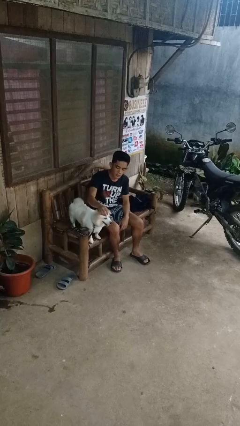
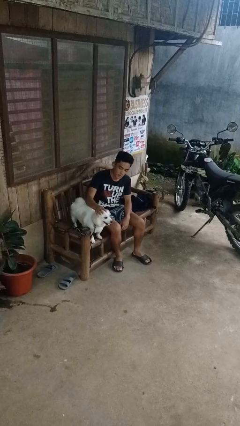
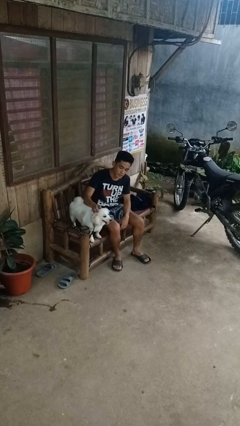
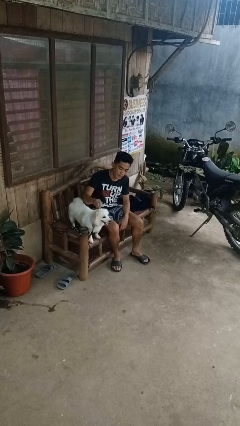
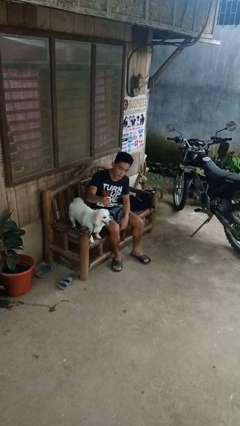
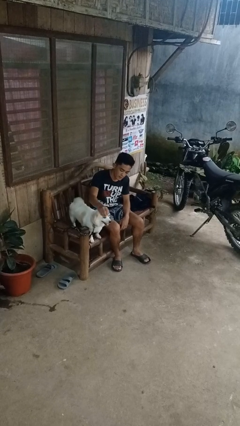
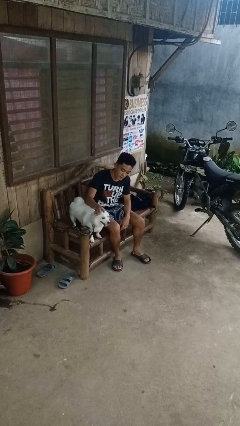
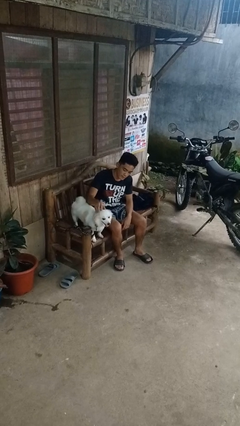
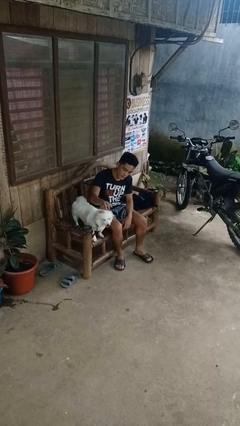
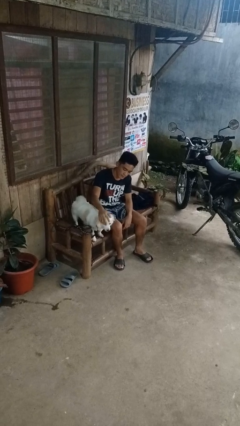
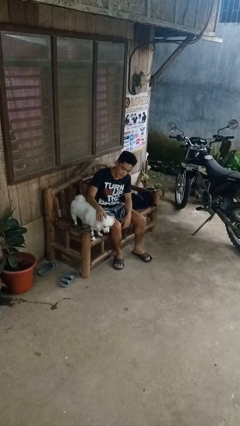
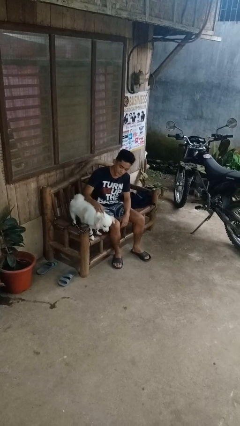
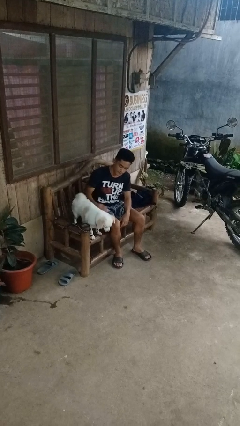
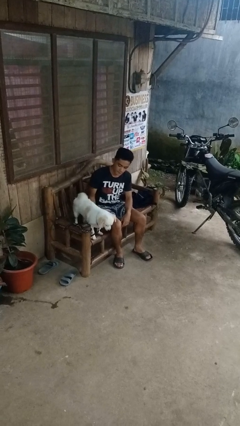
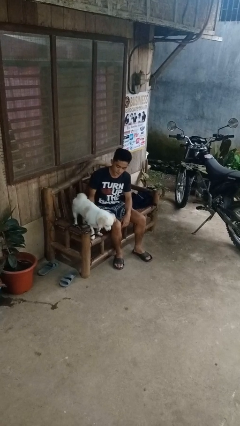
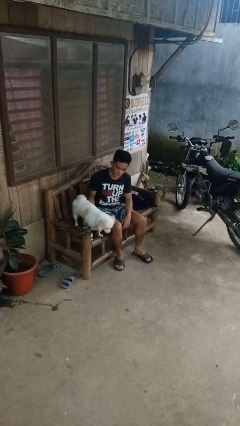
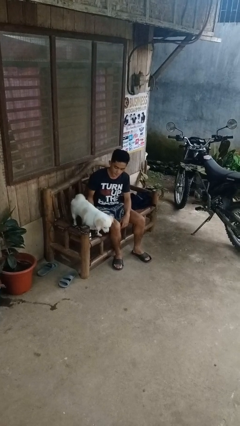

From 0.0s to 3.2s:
person pets dog

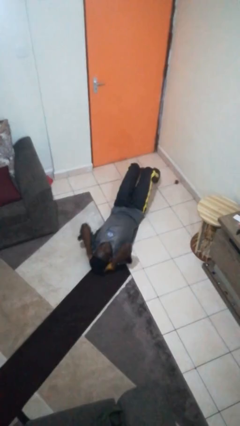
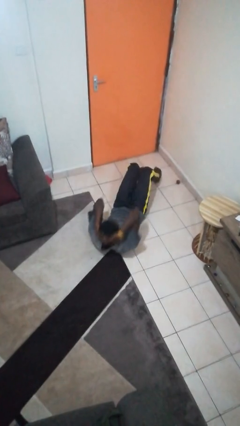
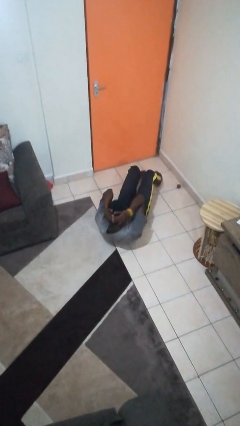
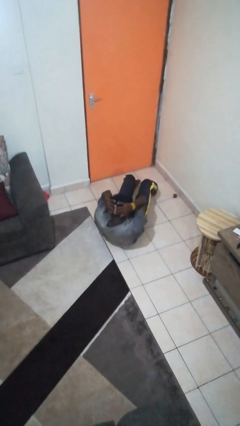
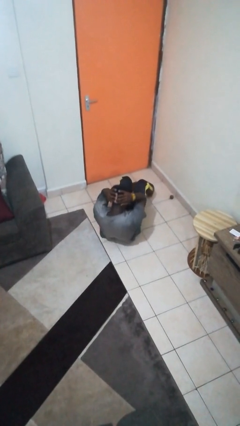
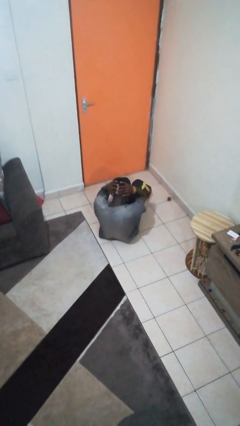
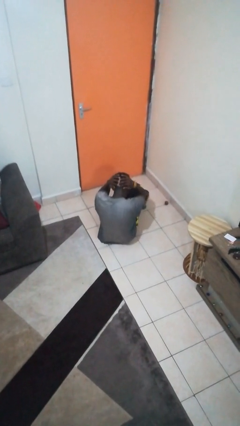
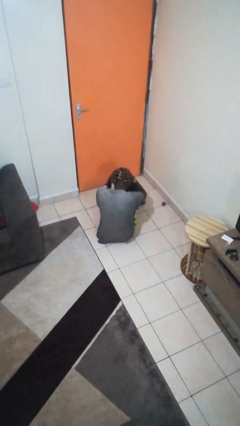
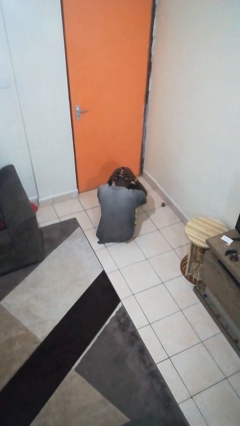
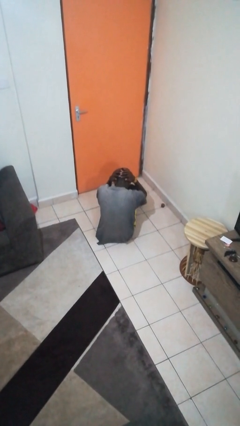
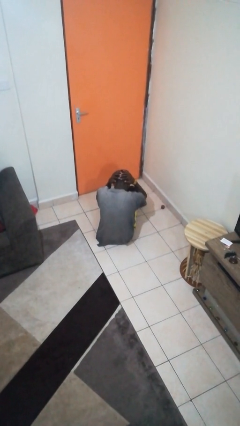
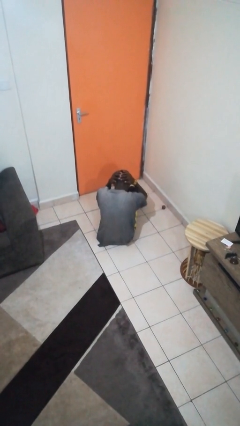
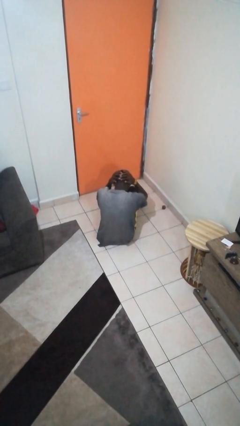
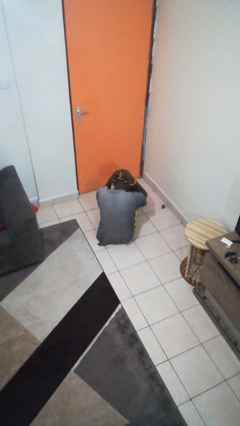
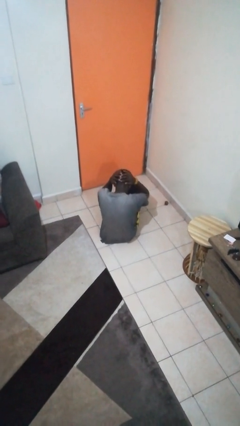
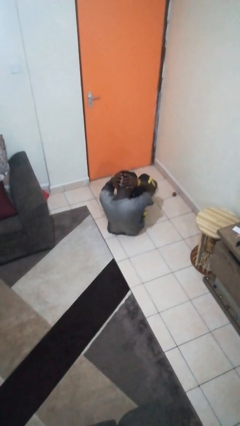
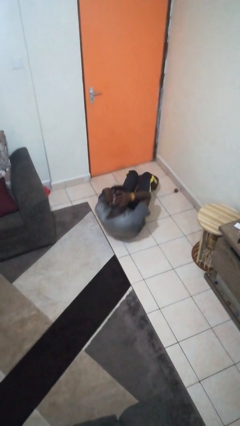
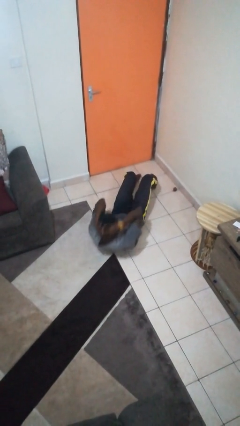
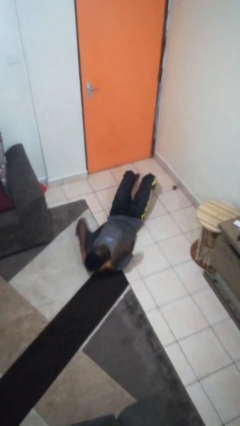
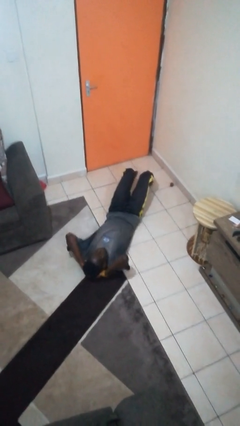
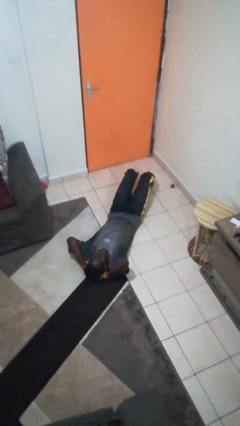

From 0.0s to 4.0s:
person exercises with situp

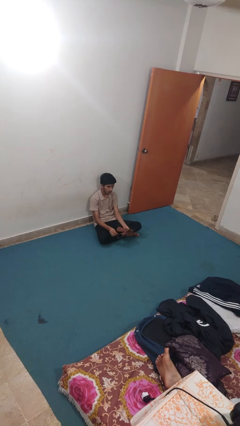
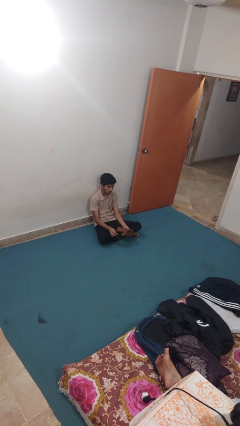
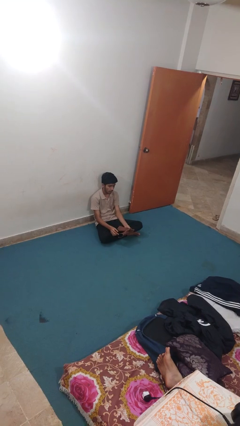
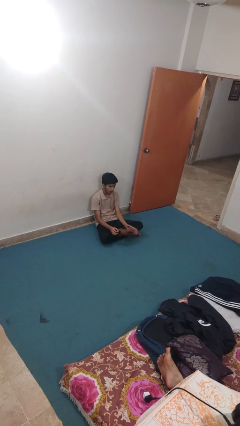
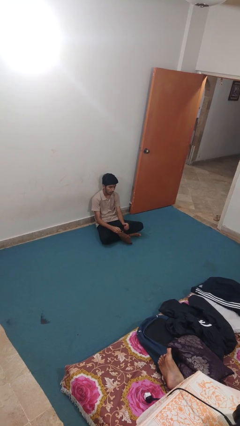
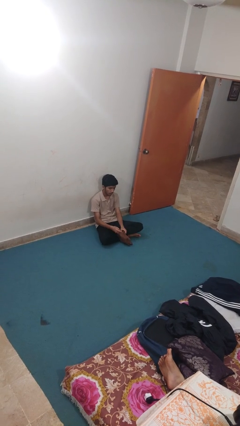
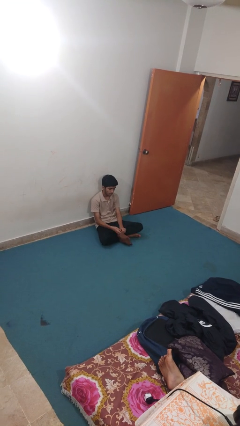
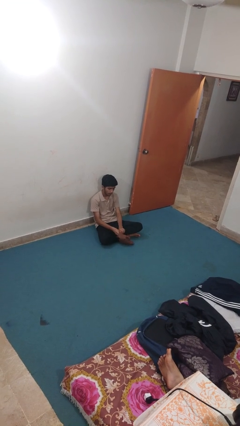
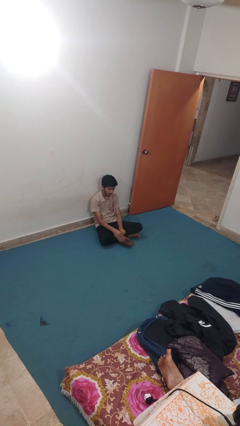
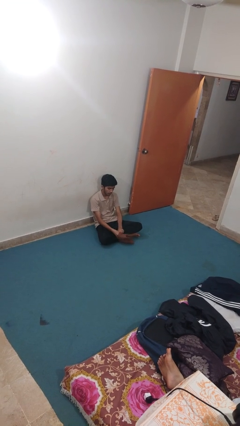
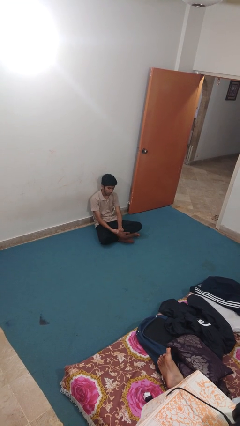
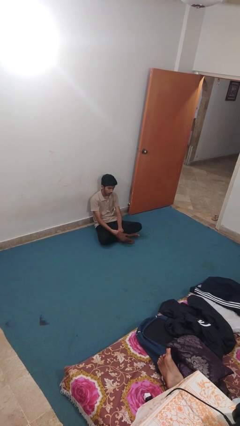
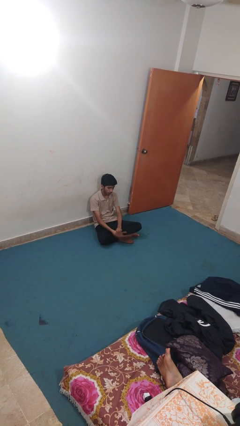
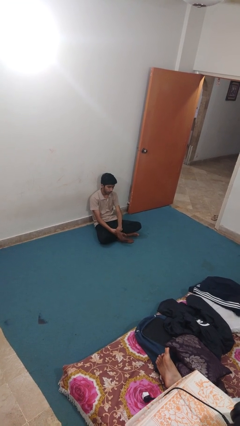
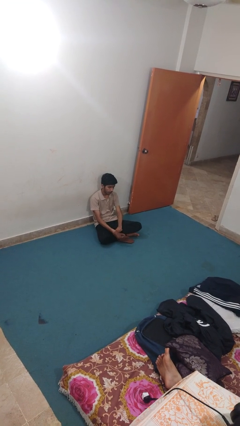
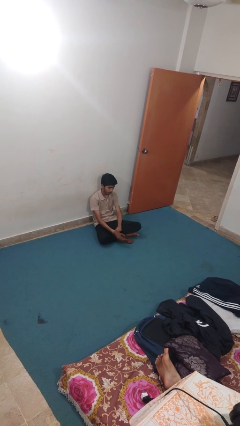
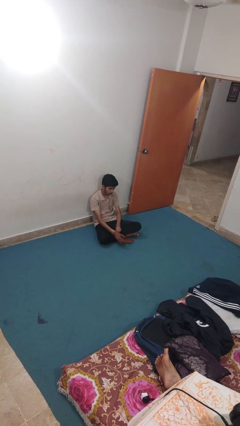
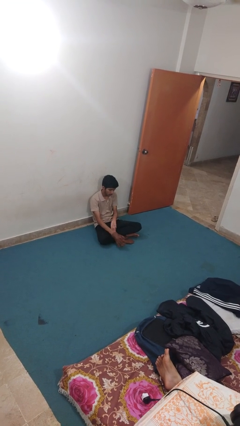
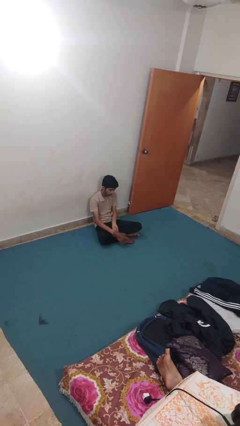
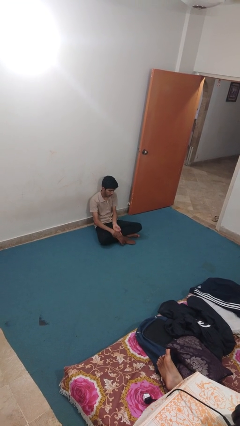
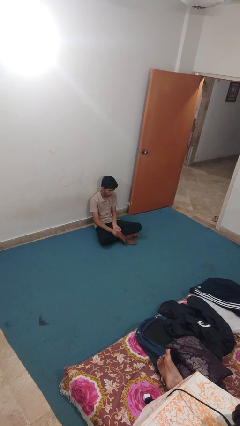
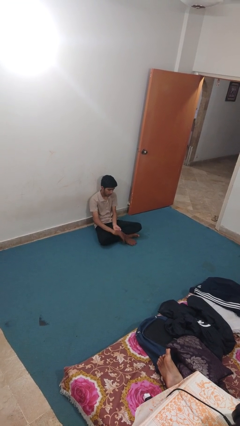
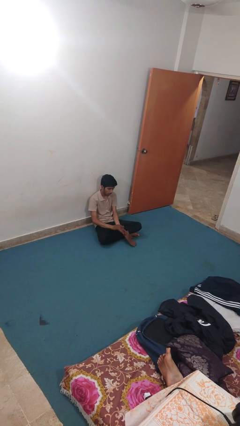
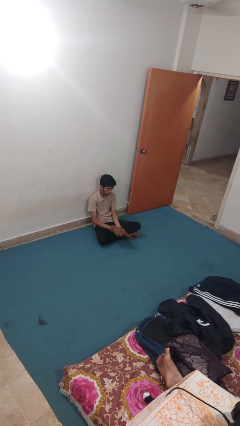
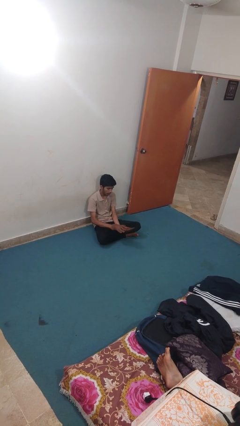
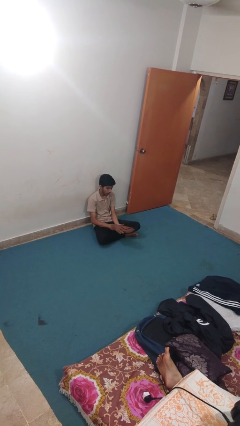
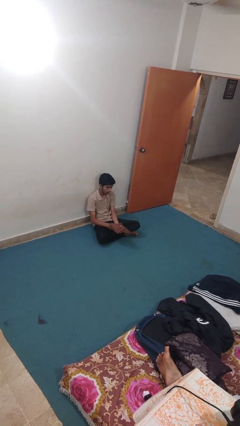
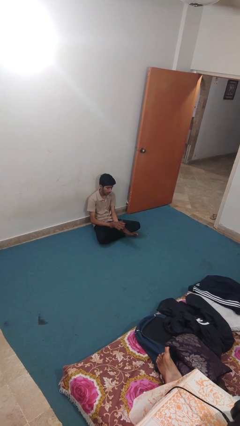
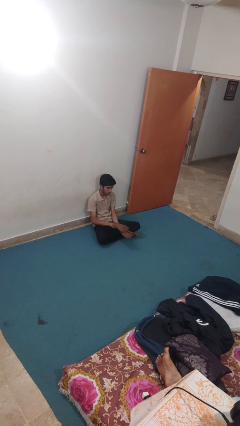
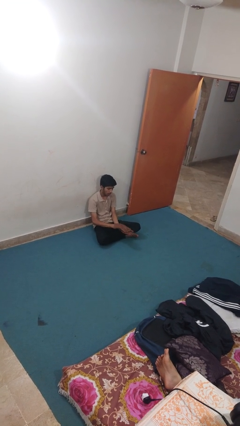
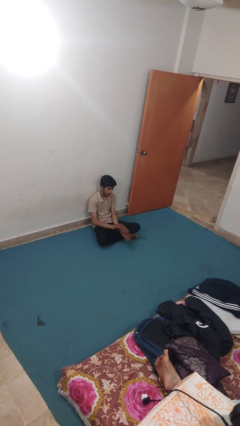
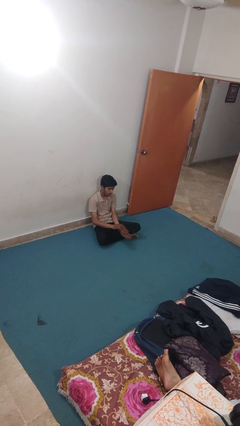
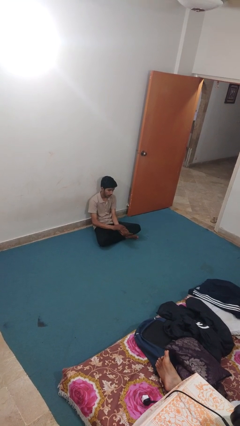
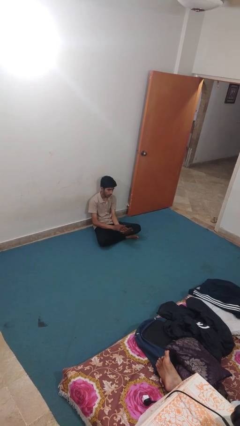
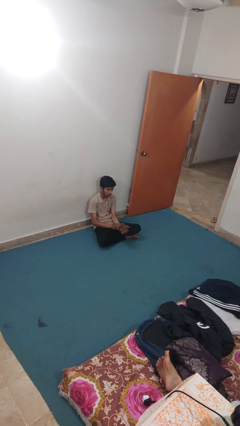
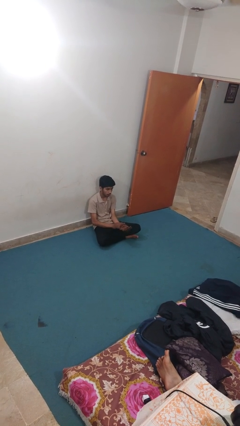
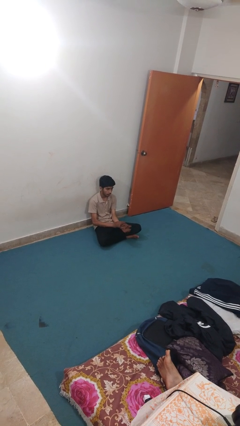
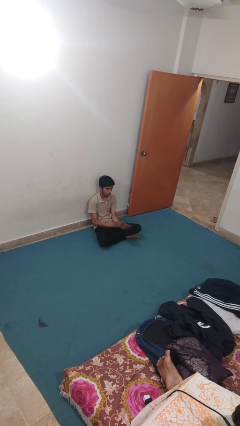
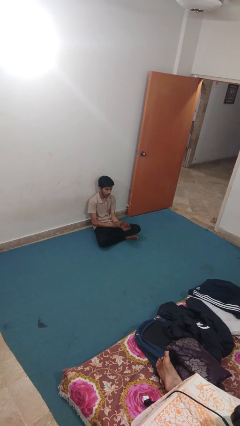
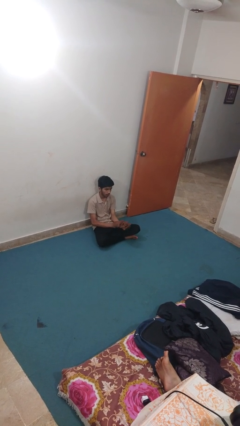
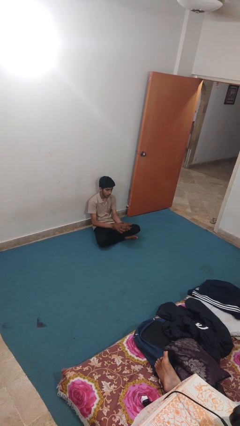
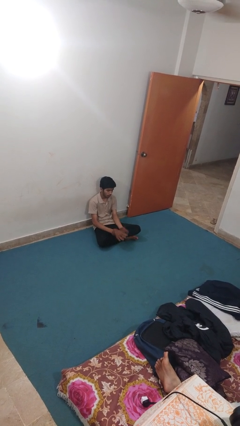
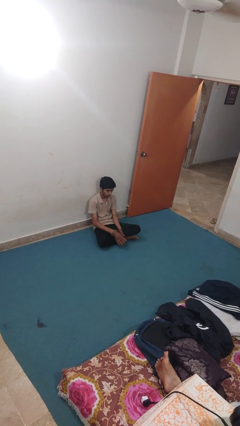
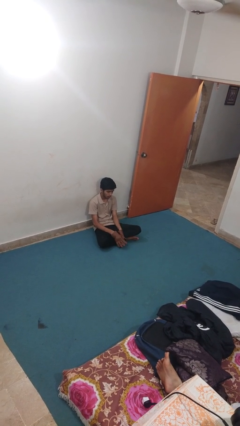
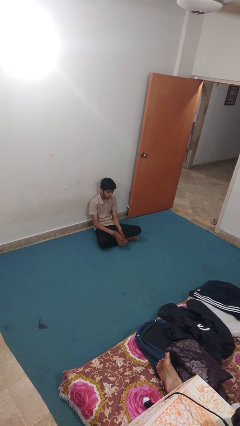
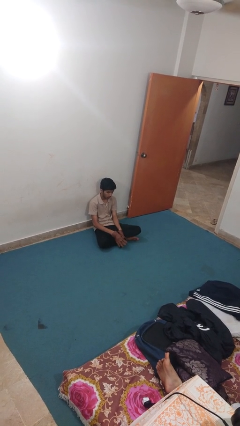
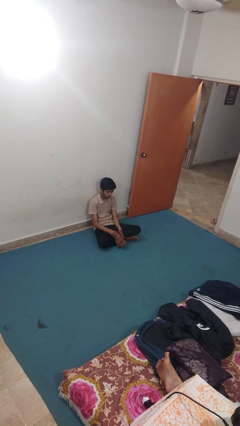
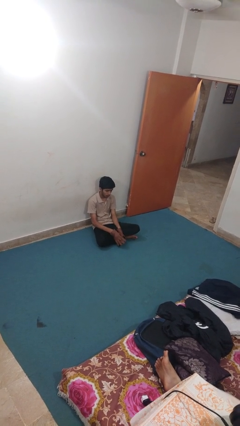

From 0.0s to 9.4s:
person puts on gloves

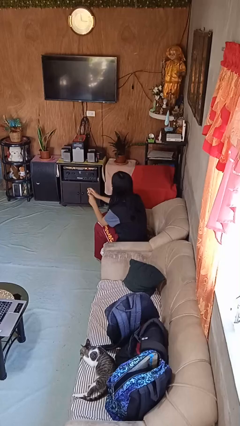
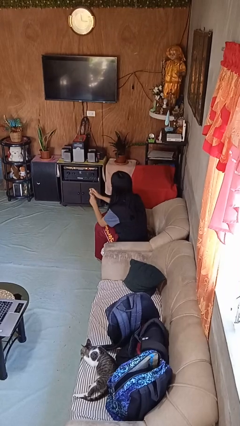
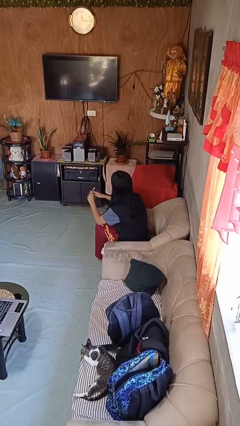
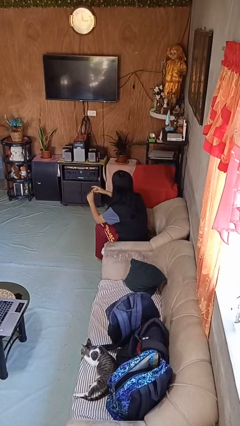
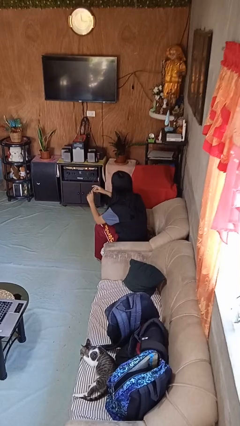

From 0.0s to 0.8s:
person files fingernails

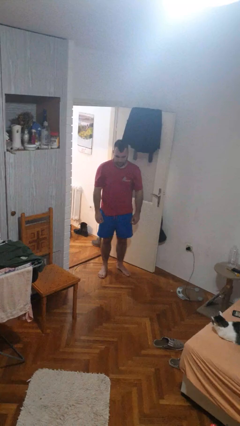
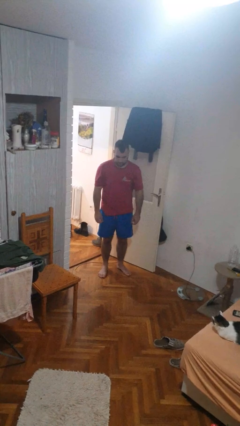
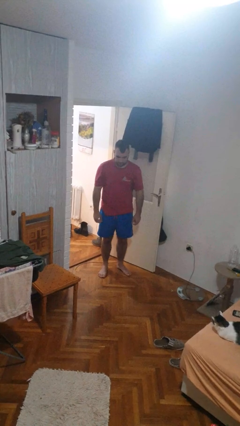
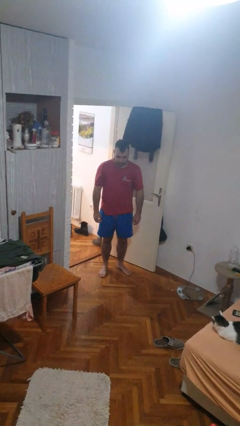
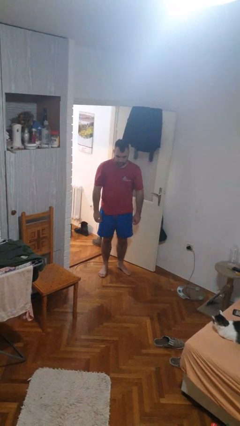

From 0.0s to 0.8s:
person sneezes into arm
